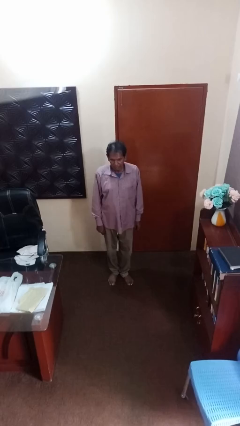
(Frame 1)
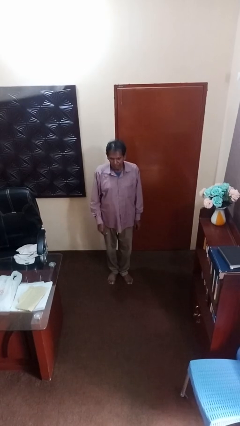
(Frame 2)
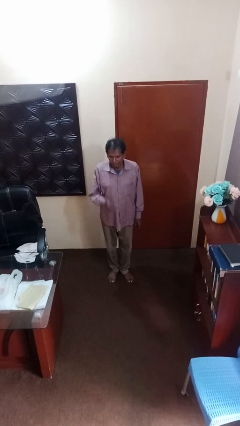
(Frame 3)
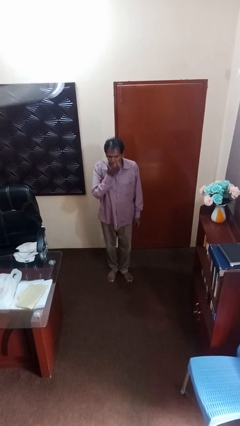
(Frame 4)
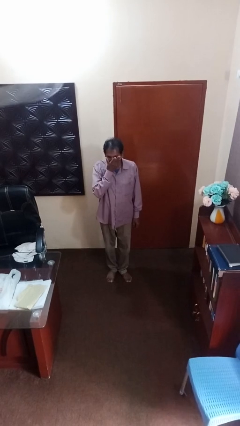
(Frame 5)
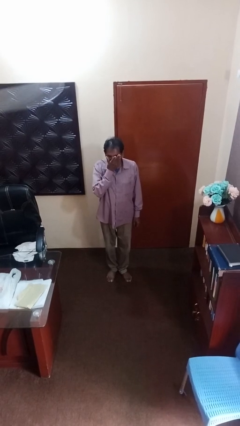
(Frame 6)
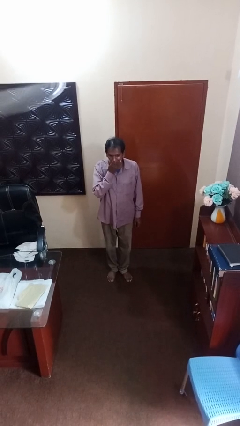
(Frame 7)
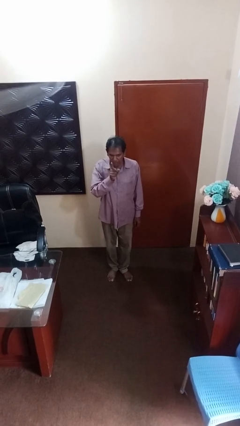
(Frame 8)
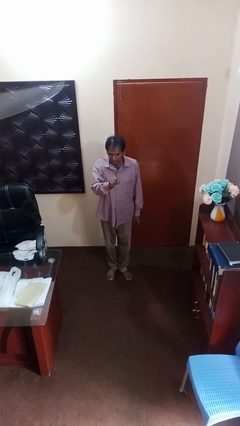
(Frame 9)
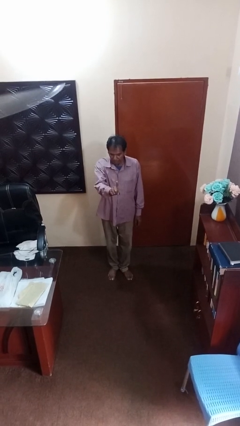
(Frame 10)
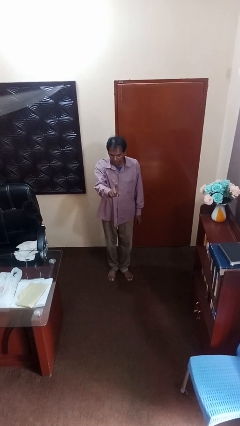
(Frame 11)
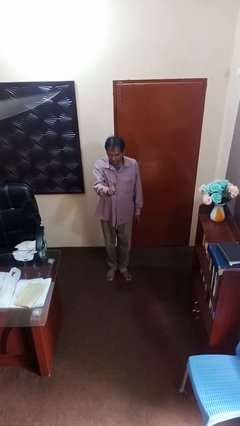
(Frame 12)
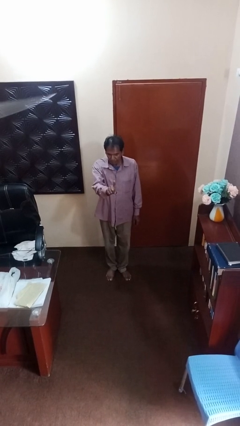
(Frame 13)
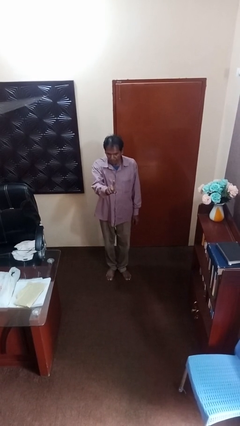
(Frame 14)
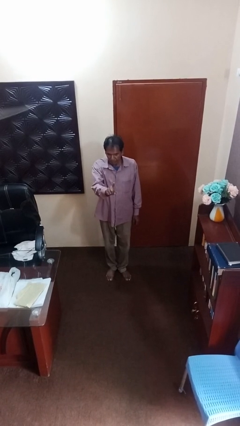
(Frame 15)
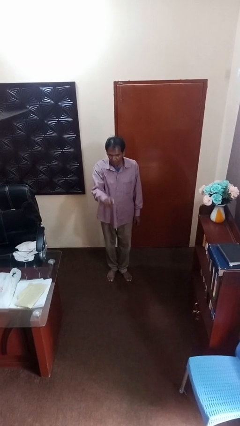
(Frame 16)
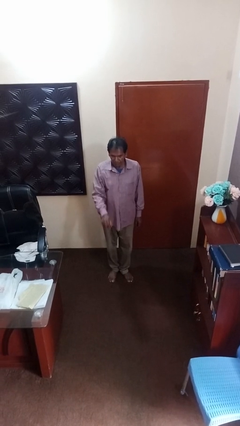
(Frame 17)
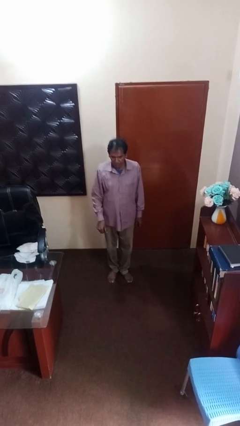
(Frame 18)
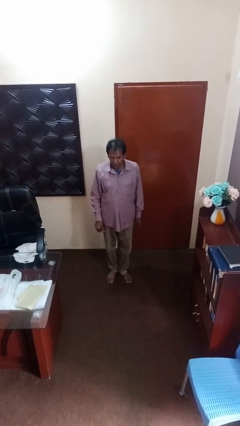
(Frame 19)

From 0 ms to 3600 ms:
person gestures behind me

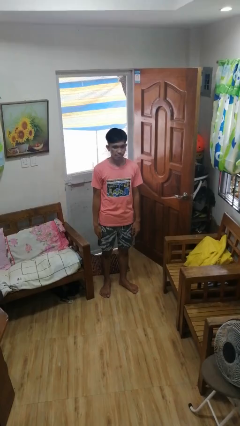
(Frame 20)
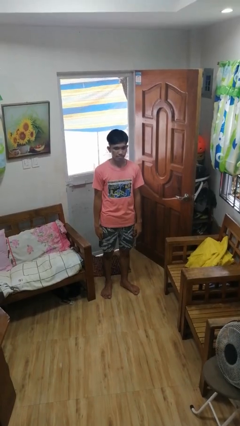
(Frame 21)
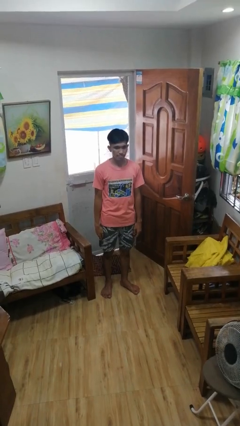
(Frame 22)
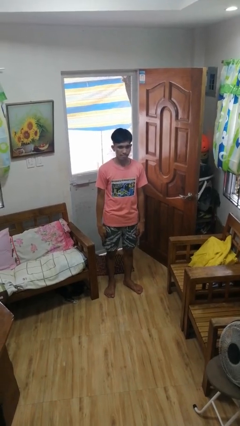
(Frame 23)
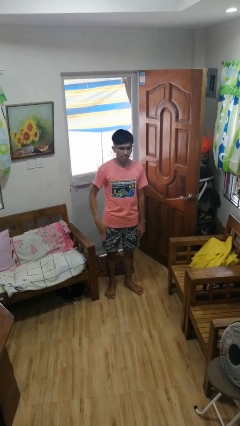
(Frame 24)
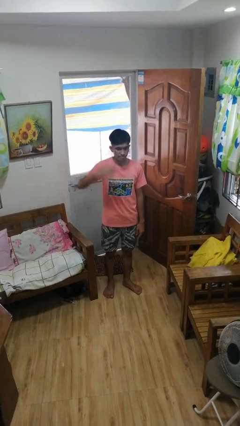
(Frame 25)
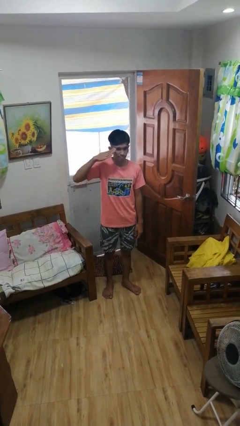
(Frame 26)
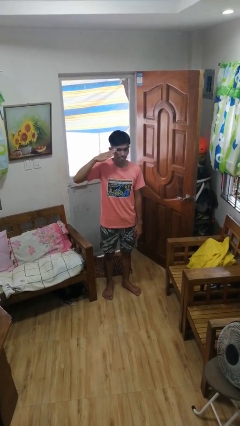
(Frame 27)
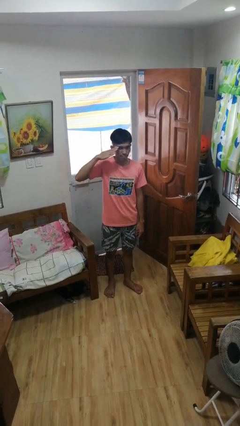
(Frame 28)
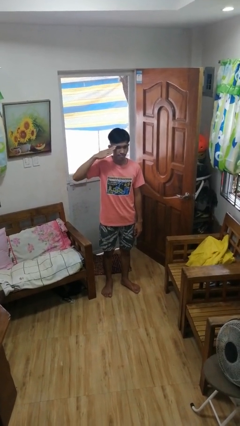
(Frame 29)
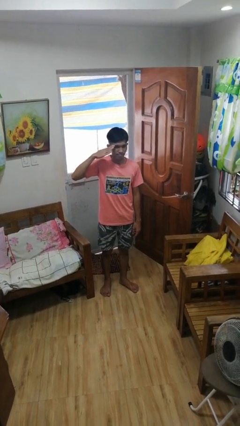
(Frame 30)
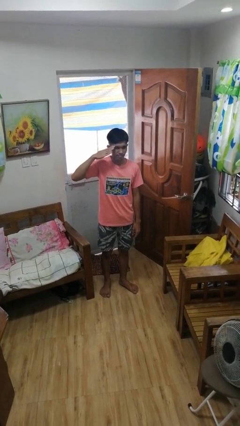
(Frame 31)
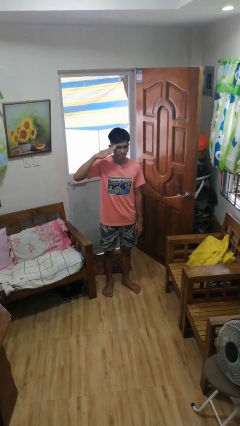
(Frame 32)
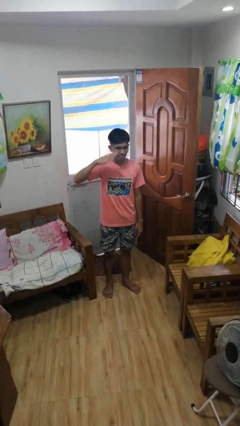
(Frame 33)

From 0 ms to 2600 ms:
person salutes

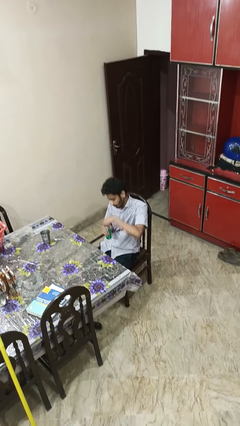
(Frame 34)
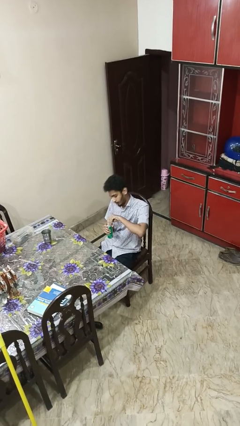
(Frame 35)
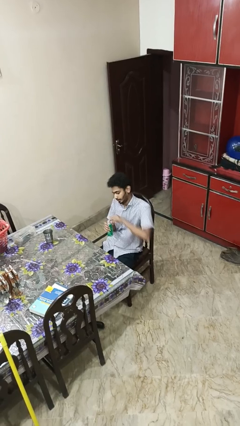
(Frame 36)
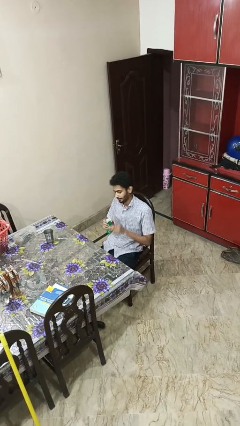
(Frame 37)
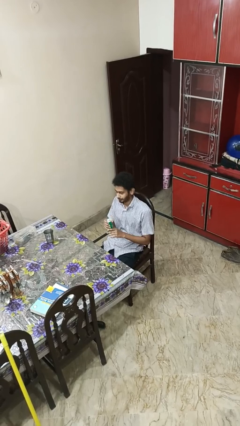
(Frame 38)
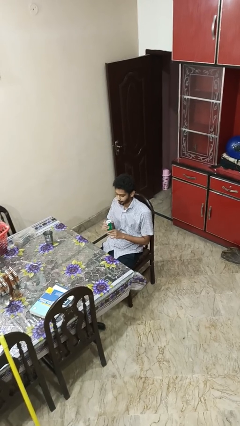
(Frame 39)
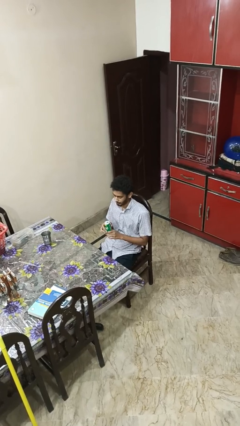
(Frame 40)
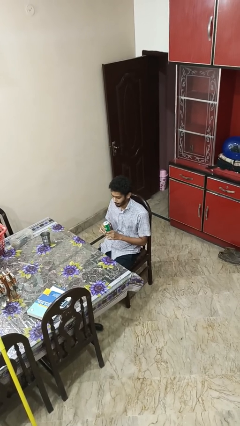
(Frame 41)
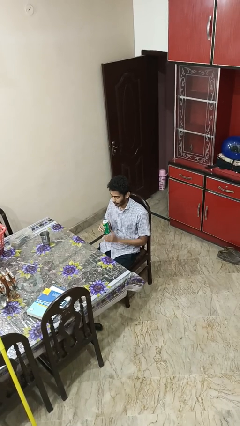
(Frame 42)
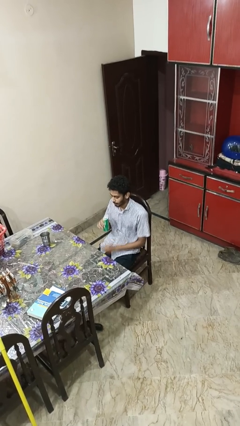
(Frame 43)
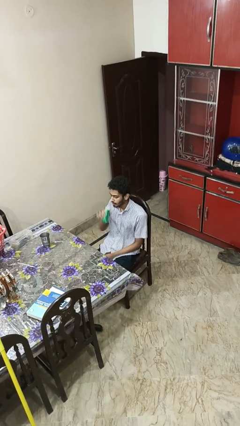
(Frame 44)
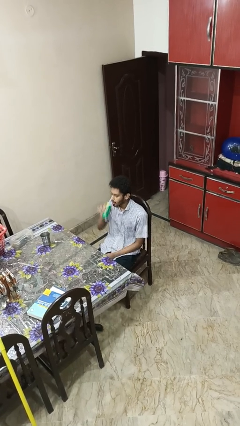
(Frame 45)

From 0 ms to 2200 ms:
person opens beverage can

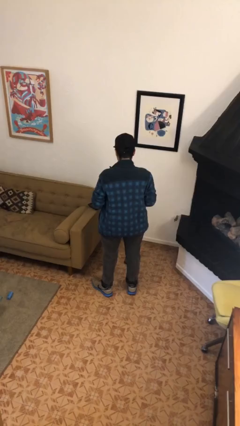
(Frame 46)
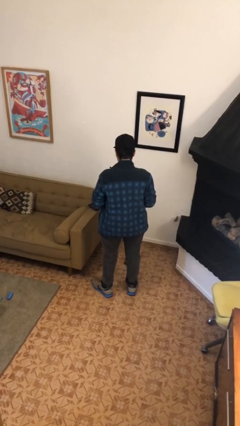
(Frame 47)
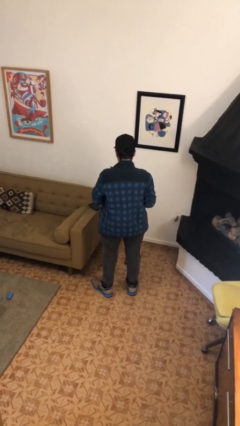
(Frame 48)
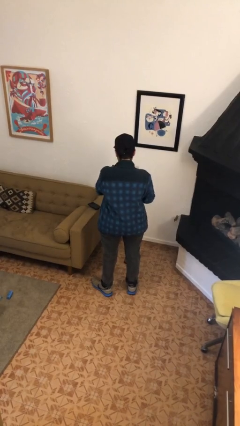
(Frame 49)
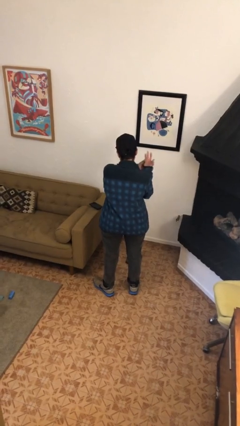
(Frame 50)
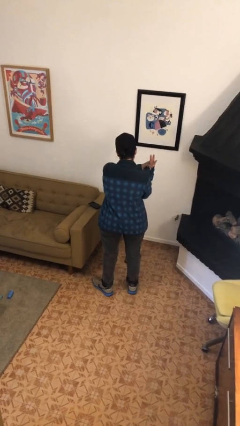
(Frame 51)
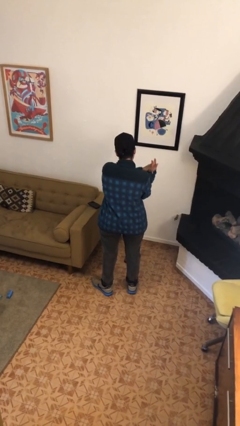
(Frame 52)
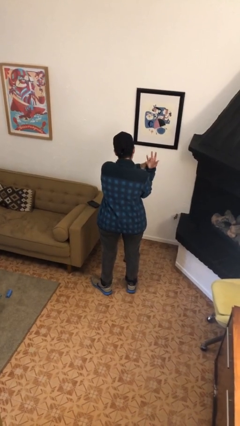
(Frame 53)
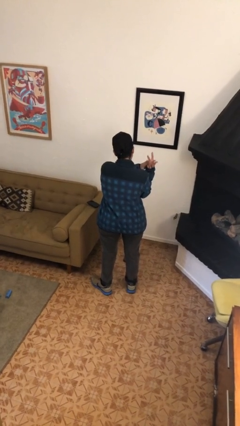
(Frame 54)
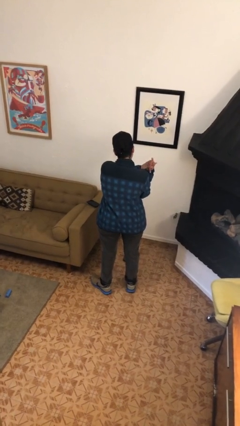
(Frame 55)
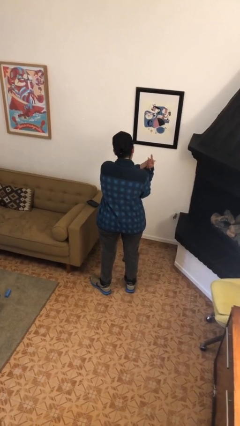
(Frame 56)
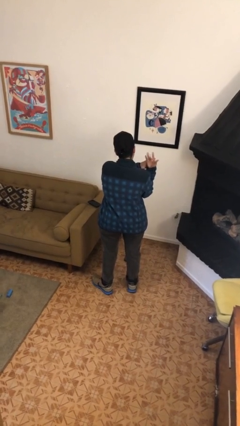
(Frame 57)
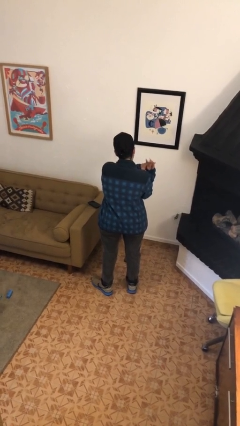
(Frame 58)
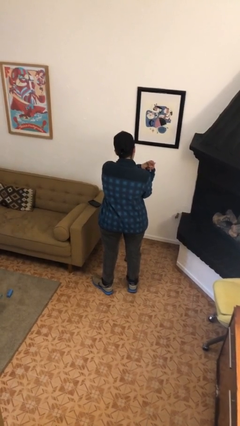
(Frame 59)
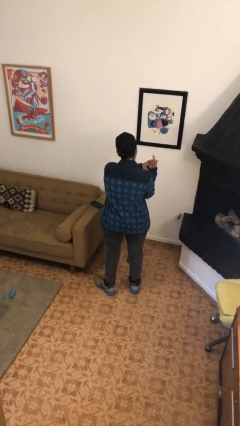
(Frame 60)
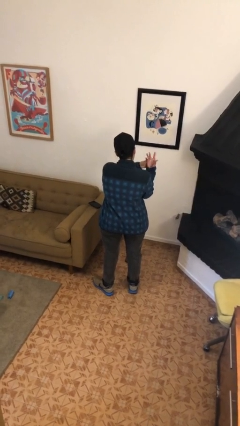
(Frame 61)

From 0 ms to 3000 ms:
person cracks knuckles

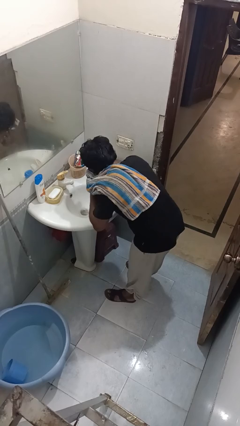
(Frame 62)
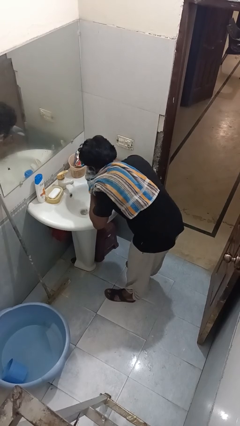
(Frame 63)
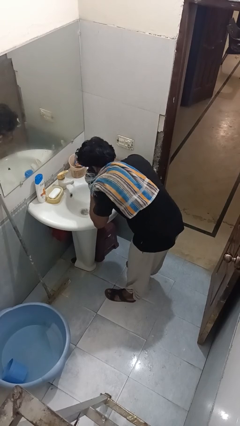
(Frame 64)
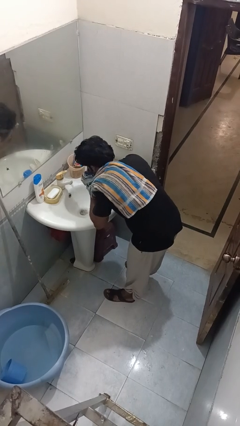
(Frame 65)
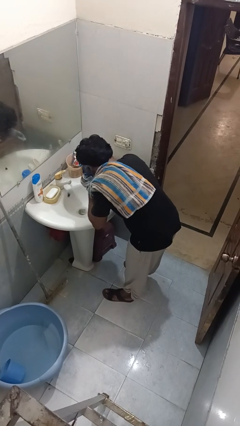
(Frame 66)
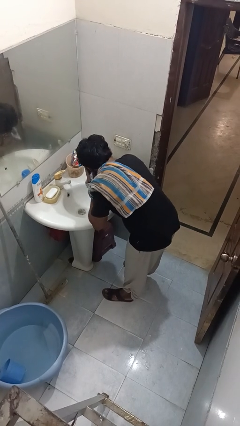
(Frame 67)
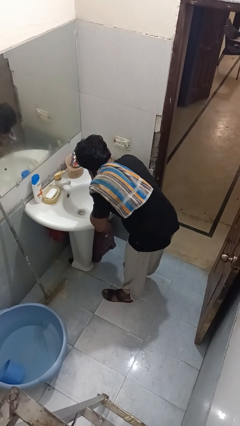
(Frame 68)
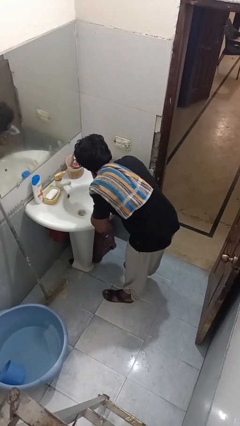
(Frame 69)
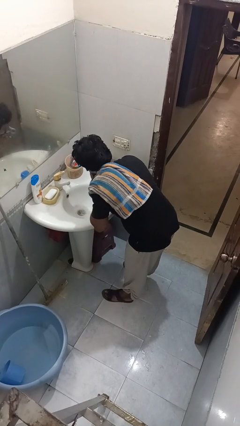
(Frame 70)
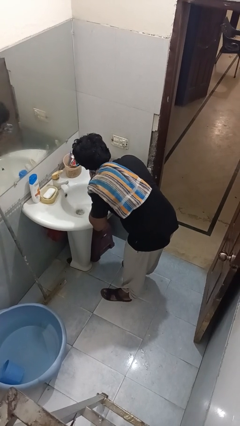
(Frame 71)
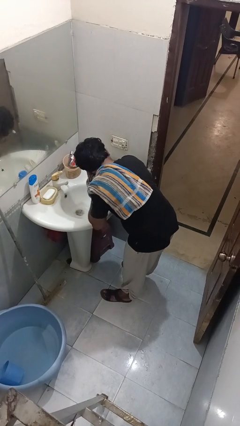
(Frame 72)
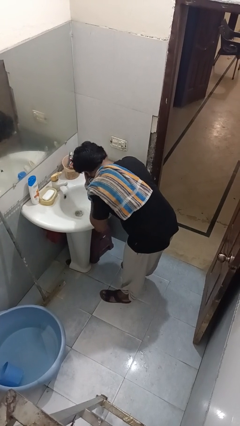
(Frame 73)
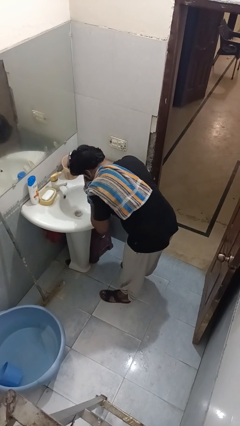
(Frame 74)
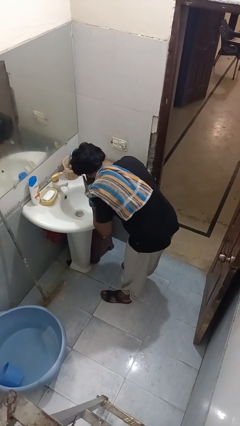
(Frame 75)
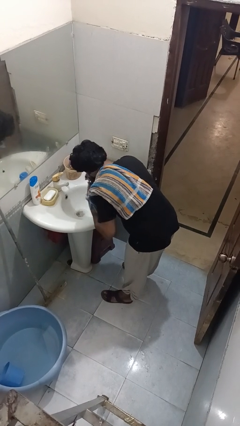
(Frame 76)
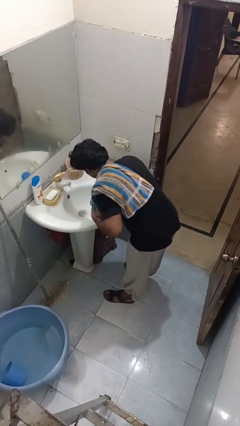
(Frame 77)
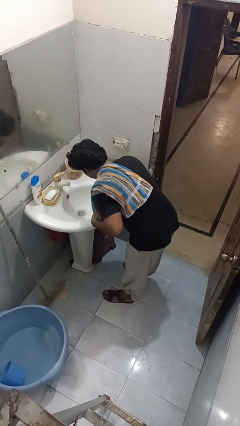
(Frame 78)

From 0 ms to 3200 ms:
person dries face with towel

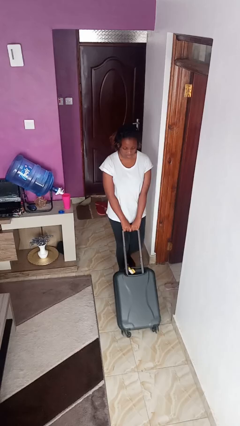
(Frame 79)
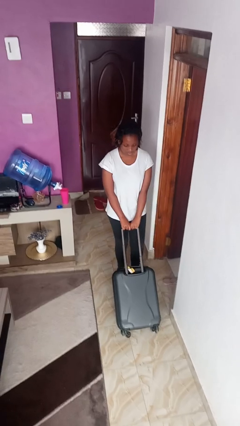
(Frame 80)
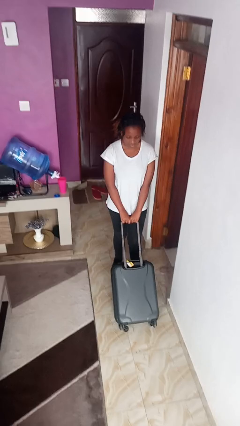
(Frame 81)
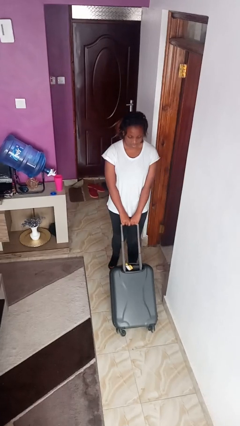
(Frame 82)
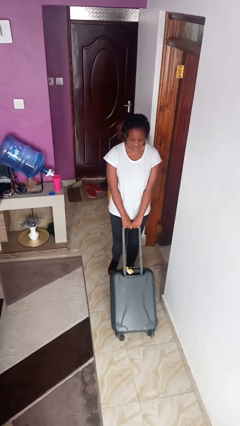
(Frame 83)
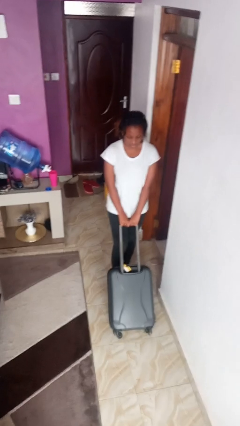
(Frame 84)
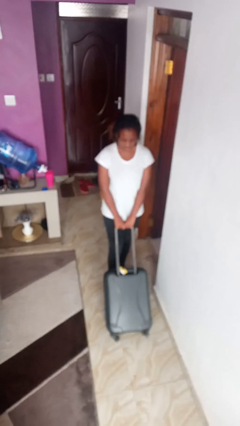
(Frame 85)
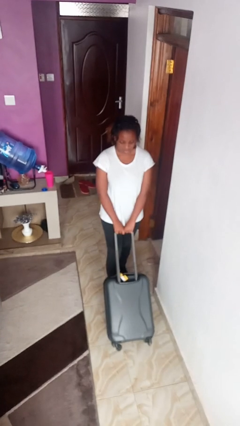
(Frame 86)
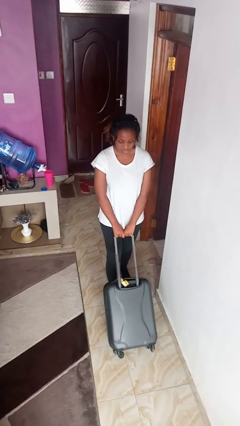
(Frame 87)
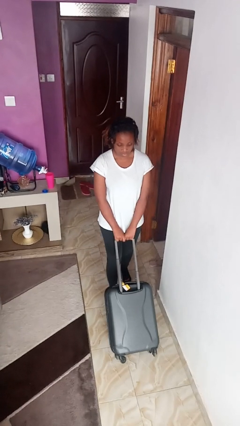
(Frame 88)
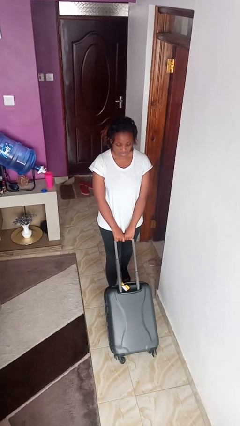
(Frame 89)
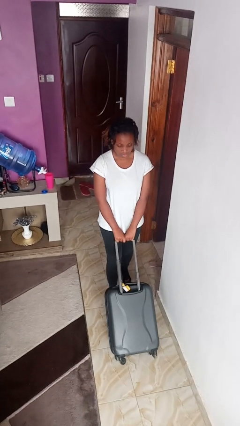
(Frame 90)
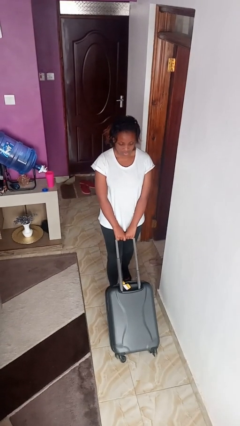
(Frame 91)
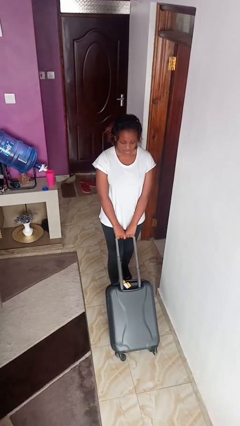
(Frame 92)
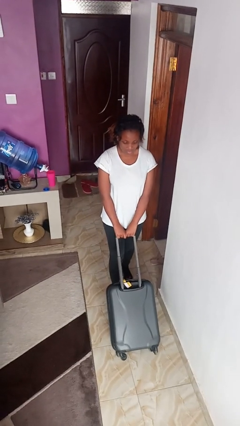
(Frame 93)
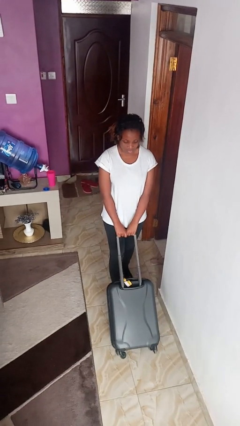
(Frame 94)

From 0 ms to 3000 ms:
person pushes wheeled cart
